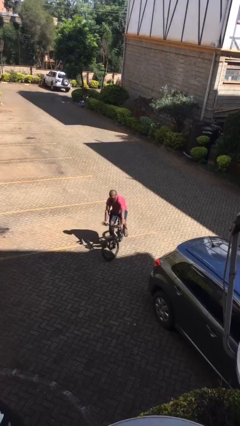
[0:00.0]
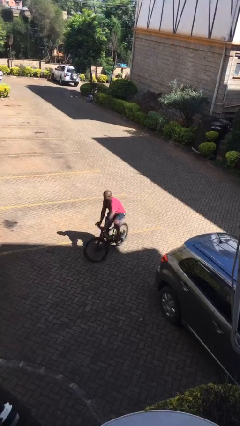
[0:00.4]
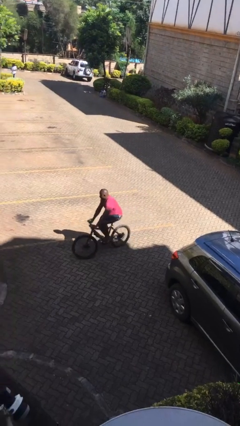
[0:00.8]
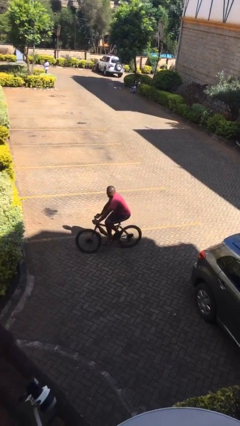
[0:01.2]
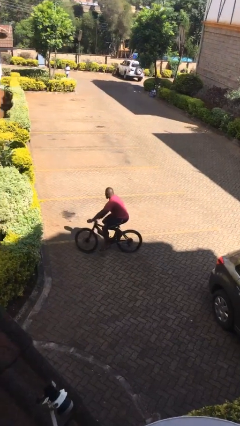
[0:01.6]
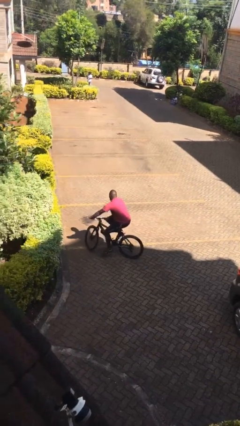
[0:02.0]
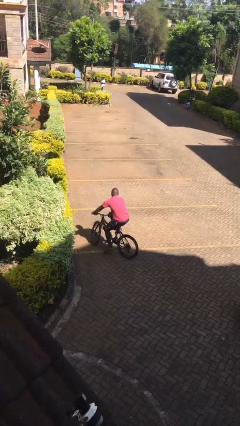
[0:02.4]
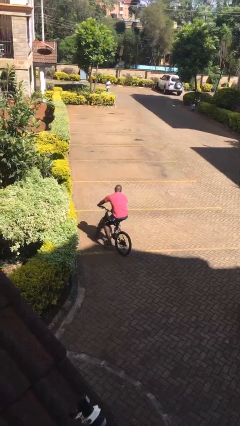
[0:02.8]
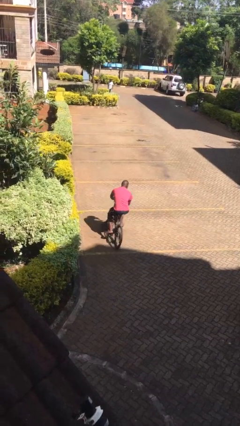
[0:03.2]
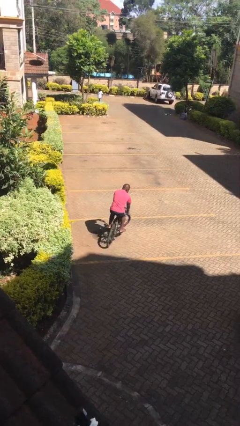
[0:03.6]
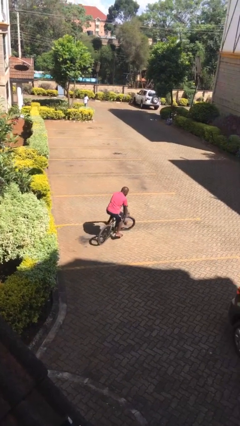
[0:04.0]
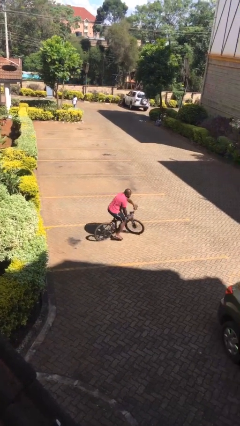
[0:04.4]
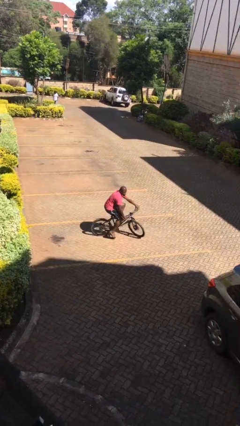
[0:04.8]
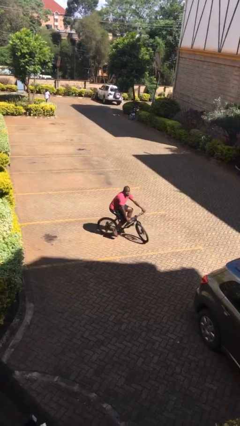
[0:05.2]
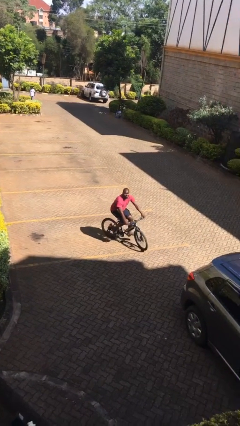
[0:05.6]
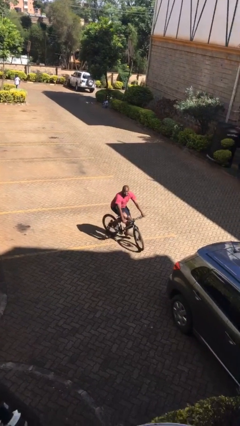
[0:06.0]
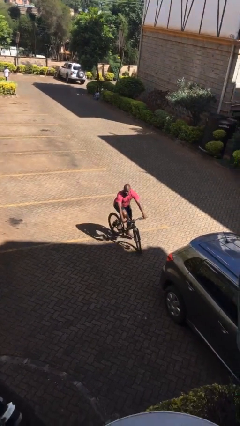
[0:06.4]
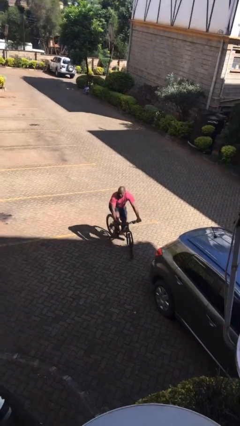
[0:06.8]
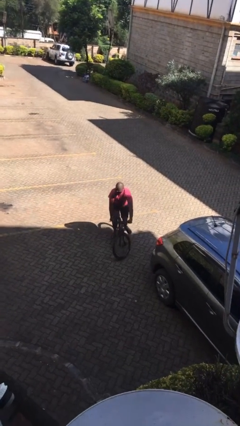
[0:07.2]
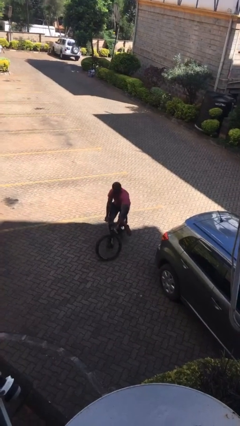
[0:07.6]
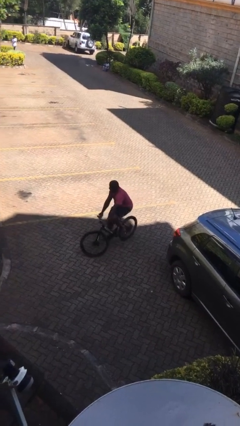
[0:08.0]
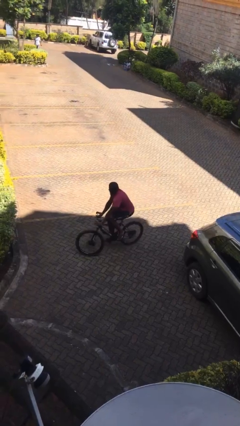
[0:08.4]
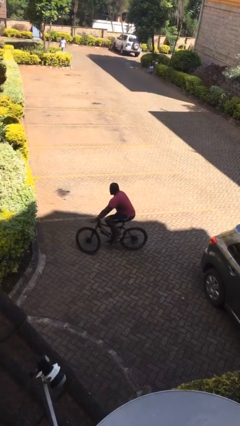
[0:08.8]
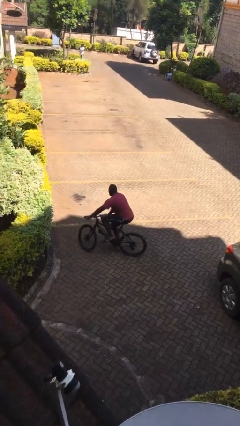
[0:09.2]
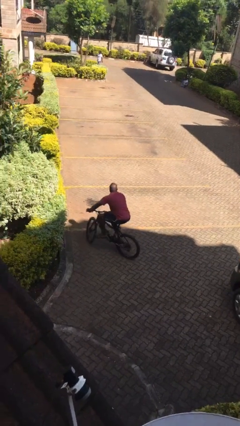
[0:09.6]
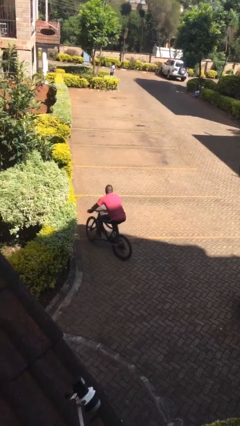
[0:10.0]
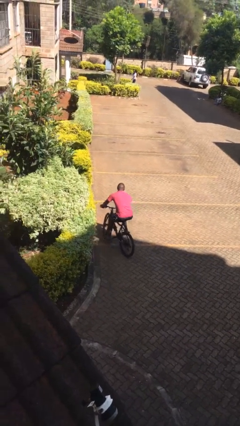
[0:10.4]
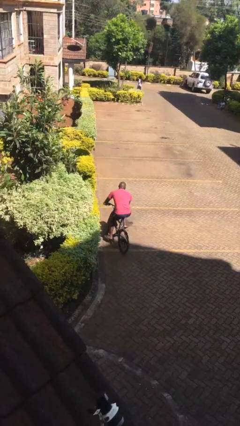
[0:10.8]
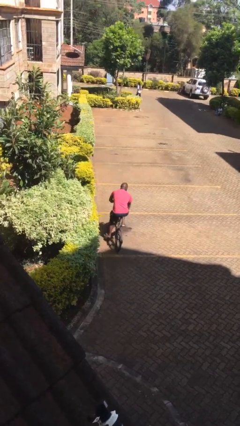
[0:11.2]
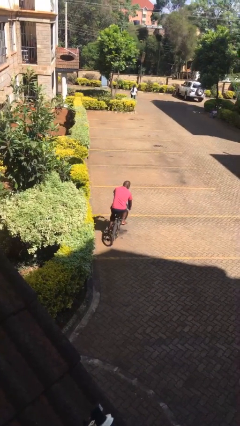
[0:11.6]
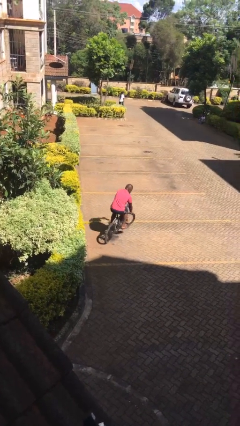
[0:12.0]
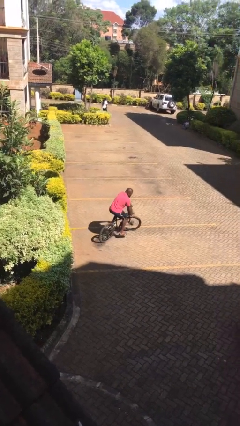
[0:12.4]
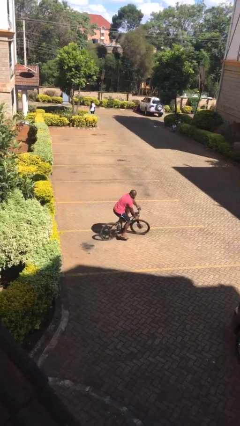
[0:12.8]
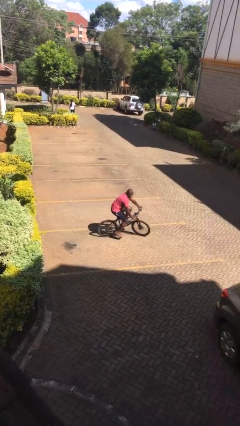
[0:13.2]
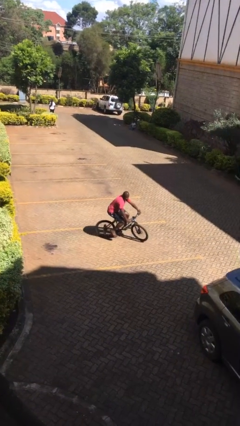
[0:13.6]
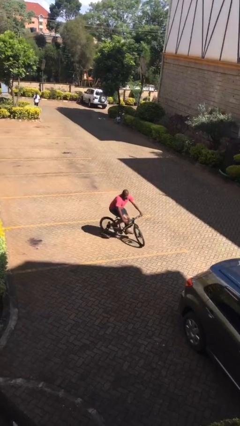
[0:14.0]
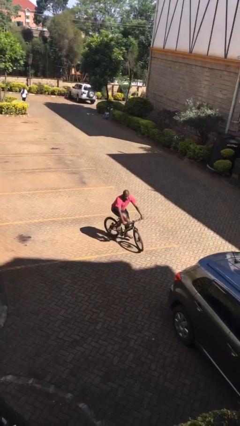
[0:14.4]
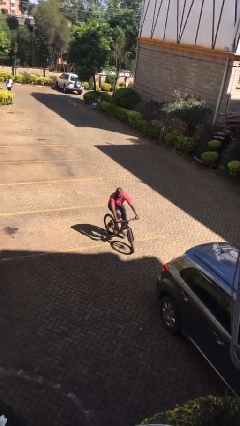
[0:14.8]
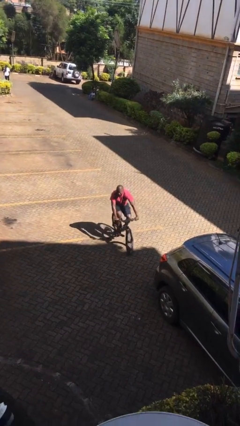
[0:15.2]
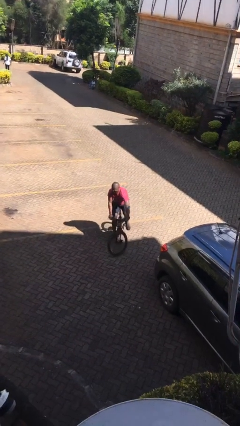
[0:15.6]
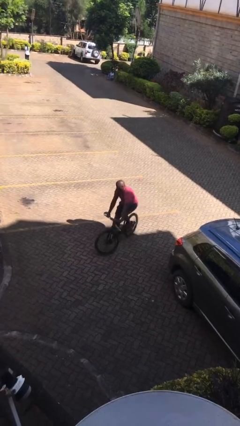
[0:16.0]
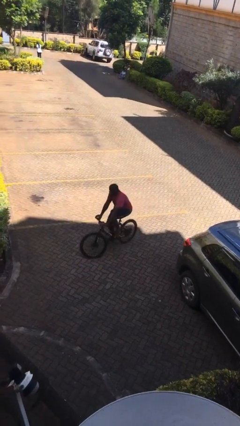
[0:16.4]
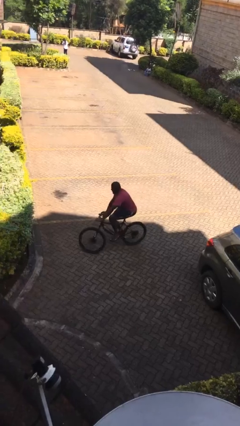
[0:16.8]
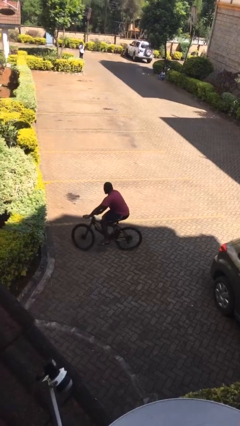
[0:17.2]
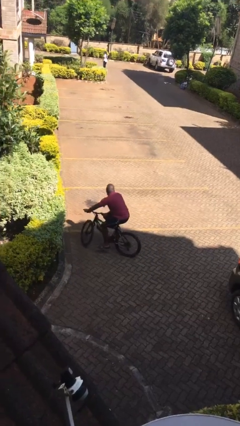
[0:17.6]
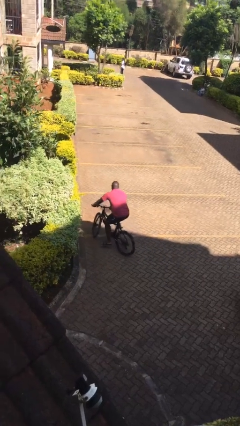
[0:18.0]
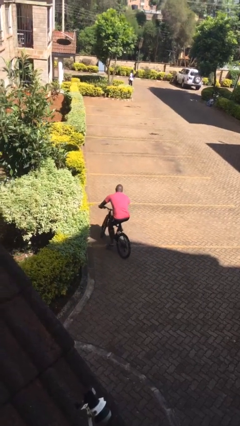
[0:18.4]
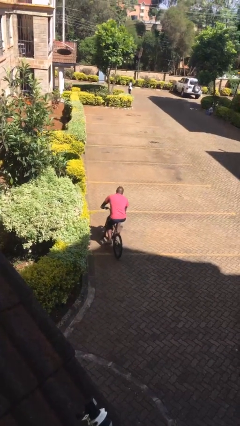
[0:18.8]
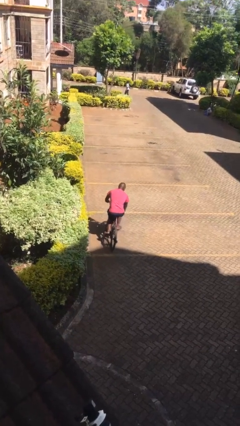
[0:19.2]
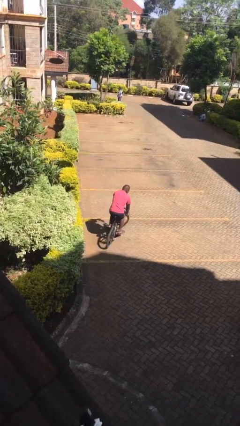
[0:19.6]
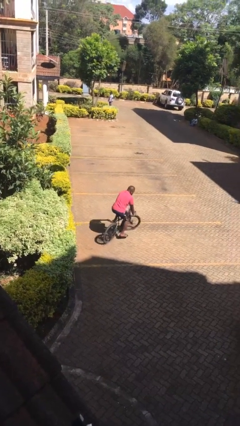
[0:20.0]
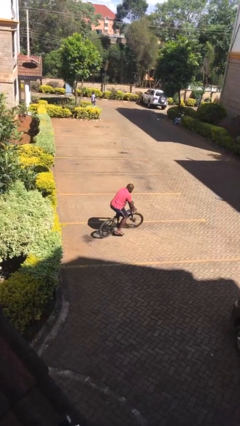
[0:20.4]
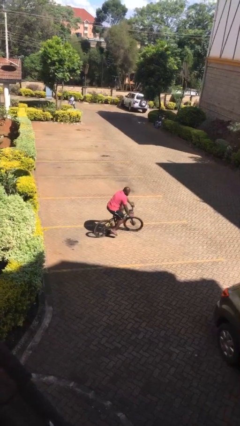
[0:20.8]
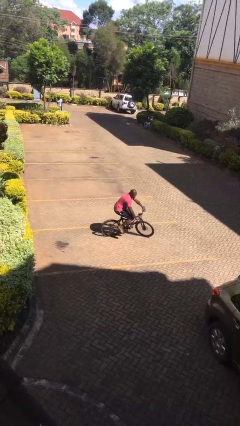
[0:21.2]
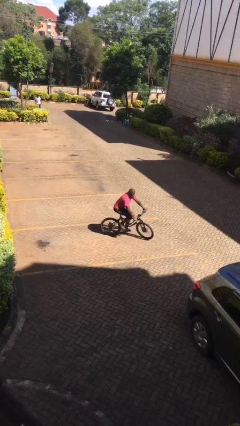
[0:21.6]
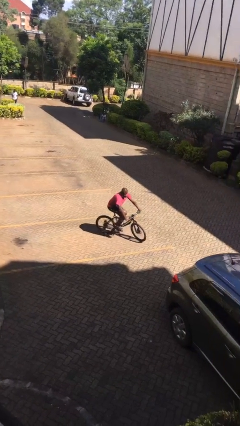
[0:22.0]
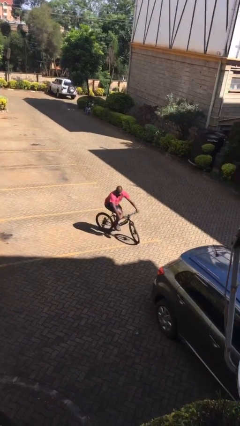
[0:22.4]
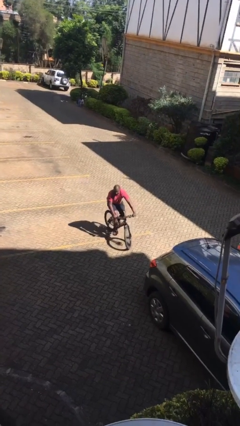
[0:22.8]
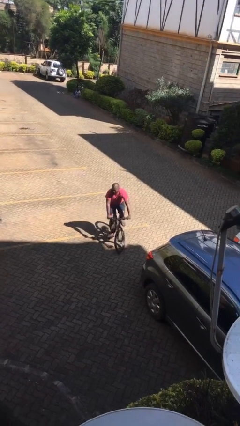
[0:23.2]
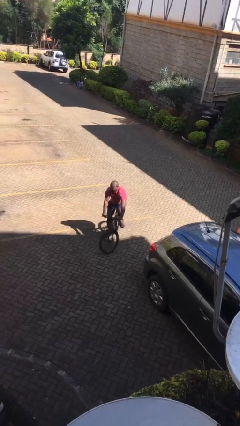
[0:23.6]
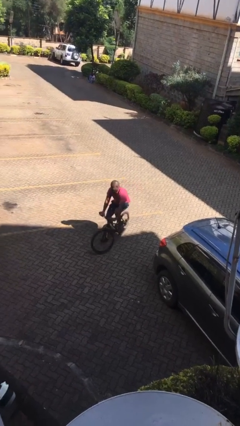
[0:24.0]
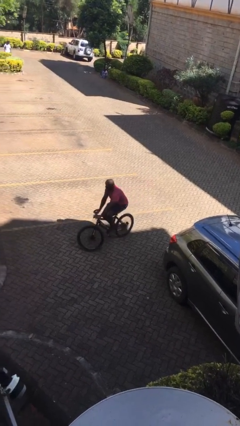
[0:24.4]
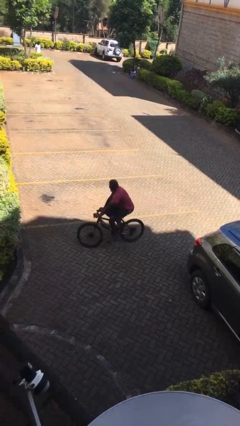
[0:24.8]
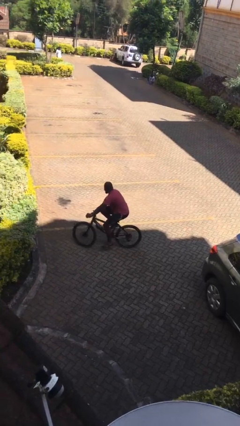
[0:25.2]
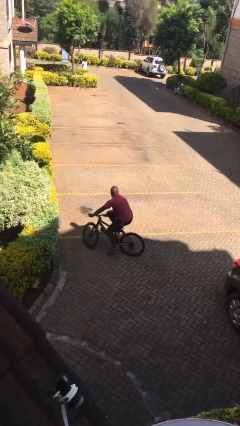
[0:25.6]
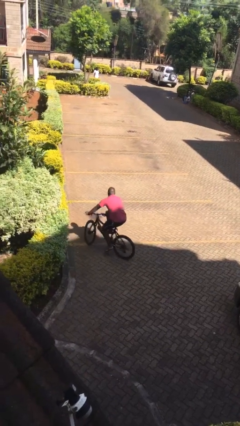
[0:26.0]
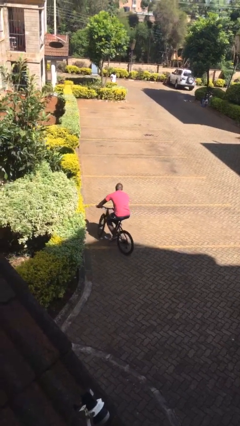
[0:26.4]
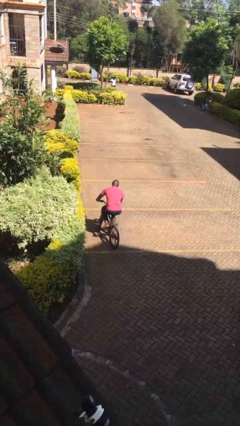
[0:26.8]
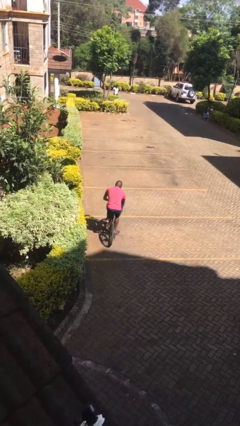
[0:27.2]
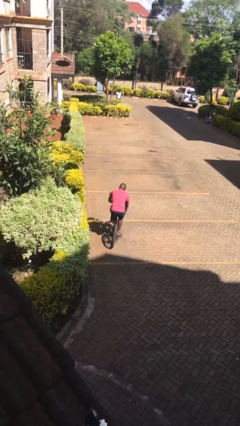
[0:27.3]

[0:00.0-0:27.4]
person rides bicycle

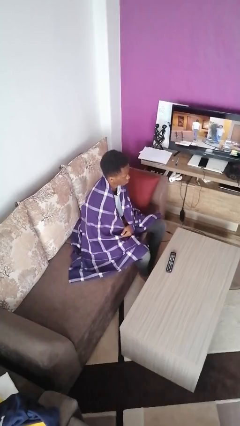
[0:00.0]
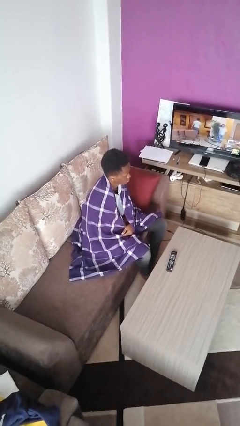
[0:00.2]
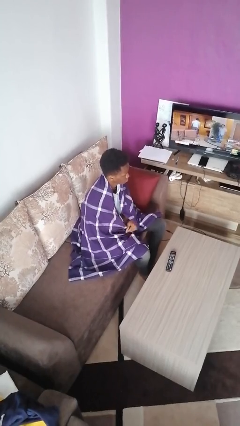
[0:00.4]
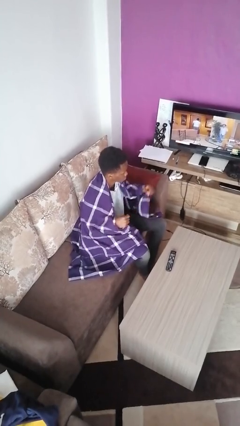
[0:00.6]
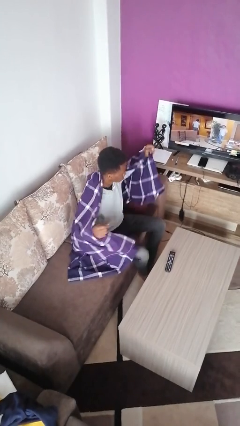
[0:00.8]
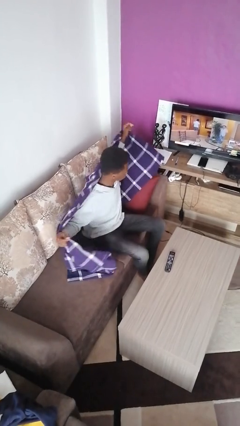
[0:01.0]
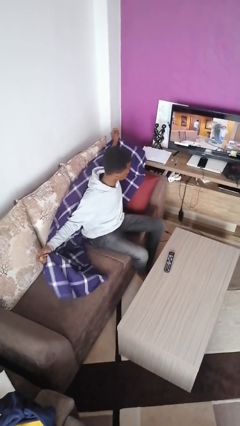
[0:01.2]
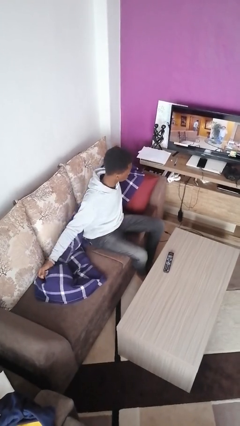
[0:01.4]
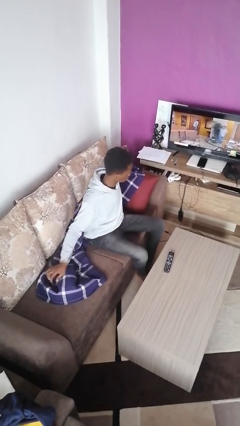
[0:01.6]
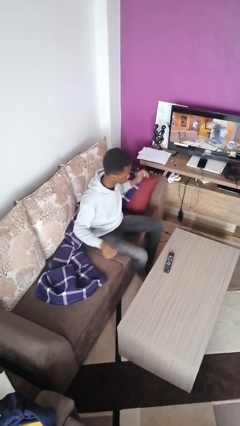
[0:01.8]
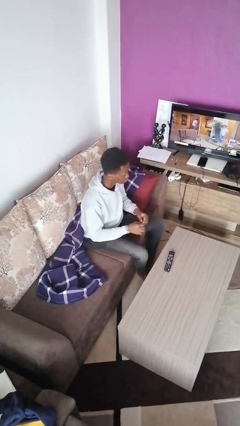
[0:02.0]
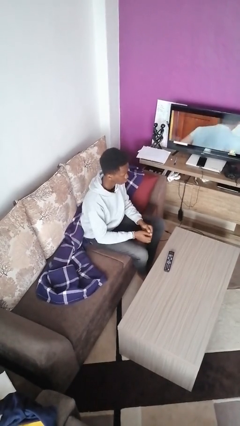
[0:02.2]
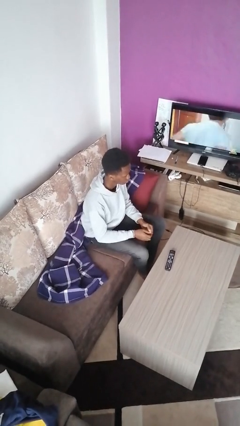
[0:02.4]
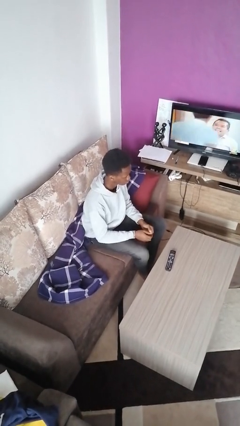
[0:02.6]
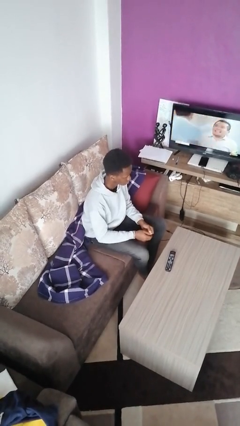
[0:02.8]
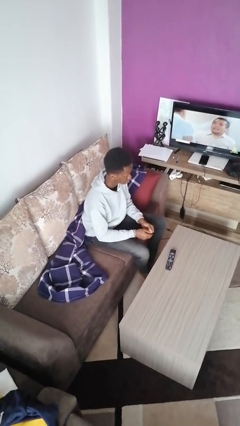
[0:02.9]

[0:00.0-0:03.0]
person uncovers with blanket

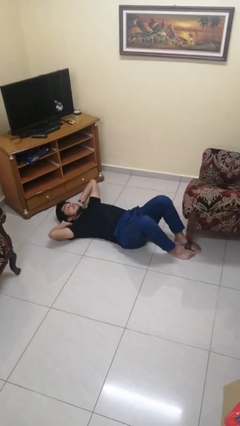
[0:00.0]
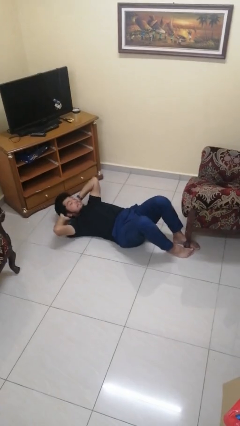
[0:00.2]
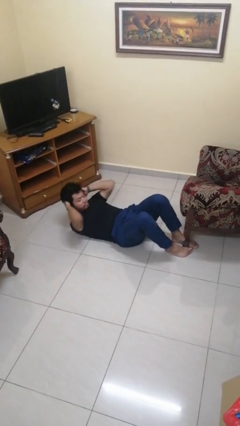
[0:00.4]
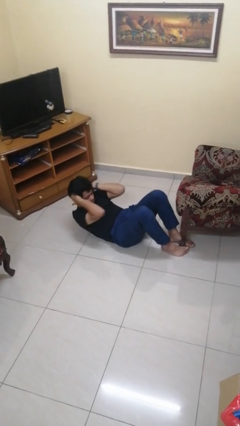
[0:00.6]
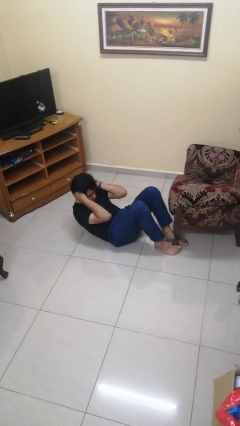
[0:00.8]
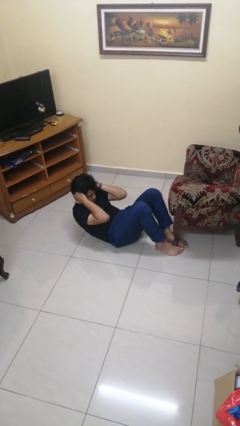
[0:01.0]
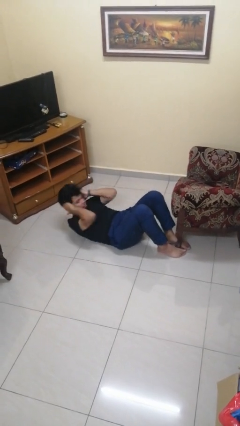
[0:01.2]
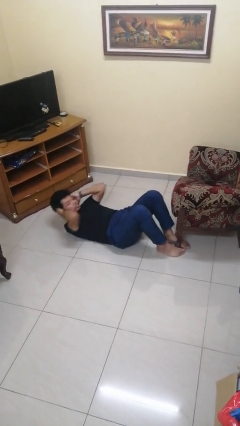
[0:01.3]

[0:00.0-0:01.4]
person exercises with situp
